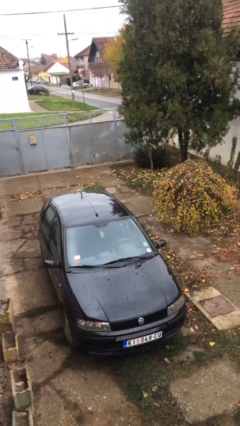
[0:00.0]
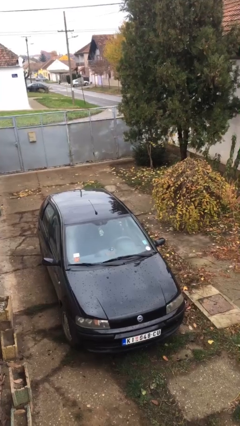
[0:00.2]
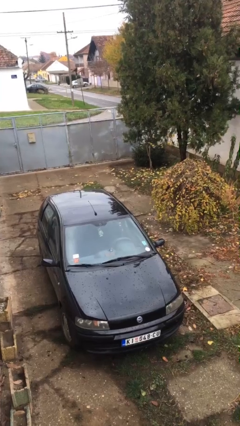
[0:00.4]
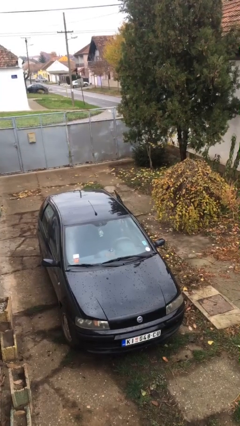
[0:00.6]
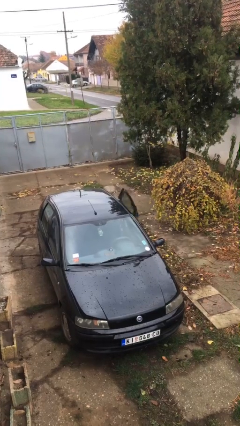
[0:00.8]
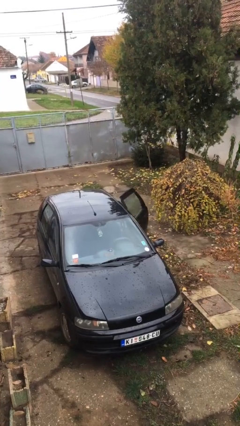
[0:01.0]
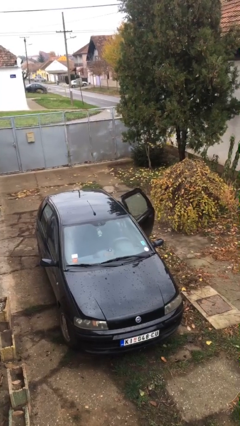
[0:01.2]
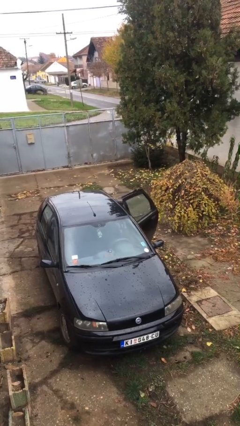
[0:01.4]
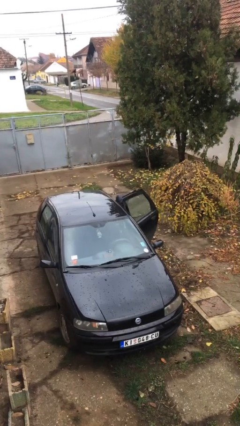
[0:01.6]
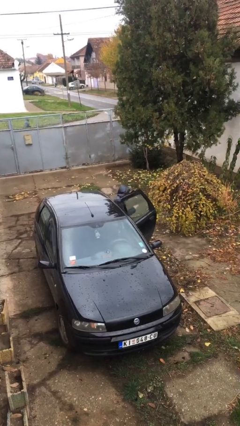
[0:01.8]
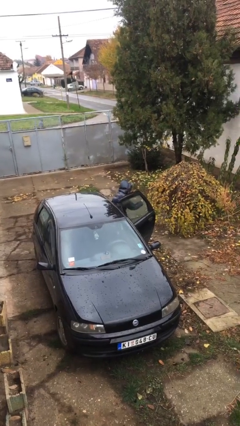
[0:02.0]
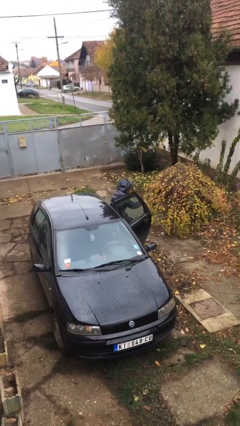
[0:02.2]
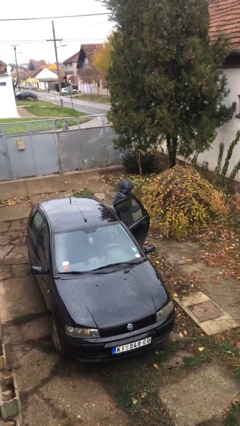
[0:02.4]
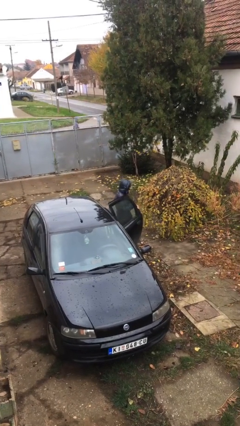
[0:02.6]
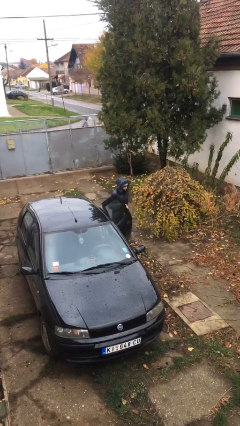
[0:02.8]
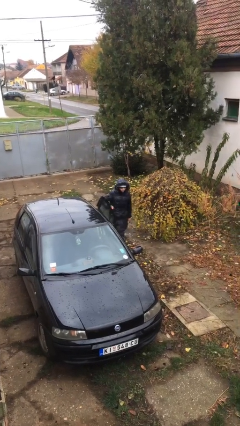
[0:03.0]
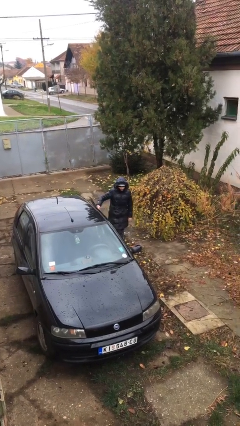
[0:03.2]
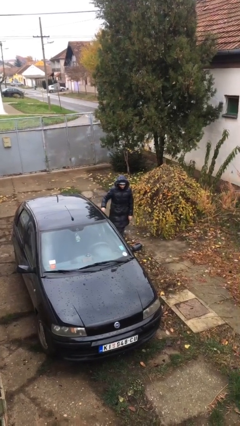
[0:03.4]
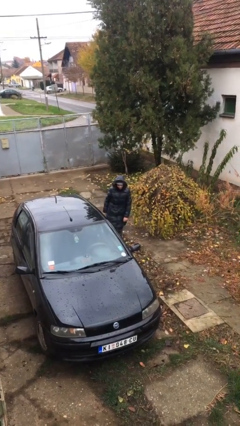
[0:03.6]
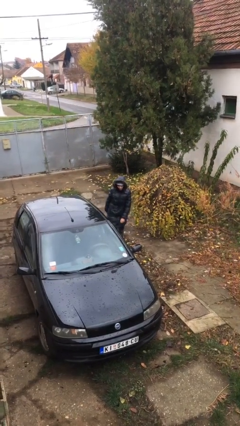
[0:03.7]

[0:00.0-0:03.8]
person exits car

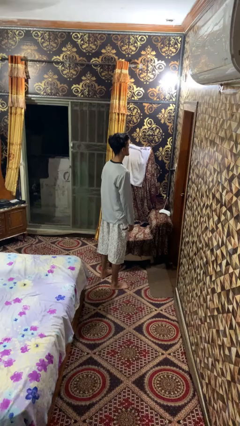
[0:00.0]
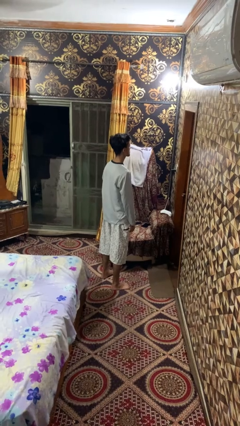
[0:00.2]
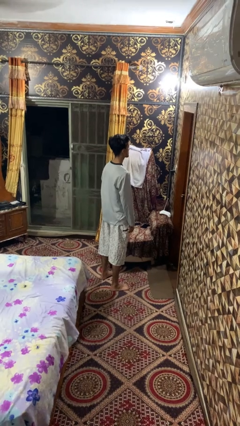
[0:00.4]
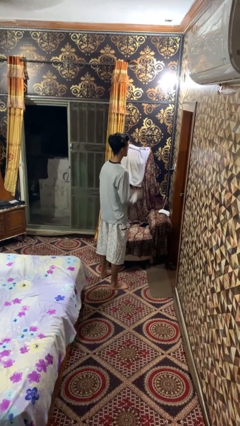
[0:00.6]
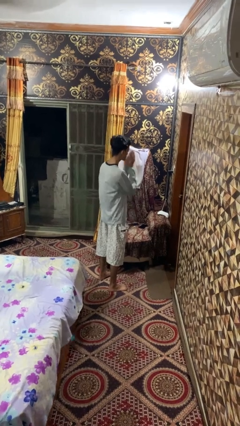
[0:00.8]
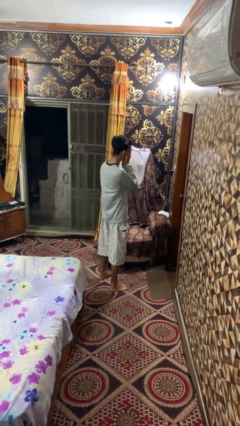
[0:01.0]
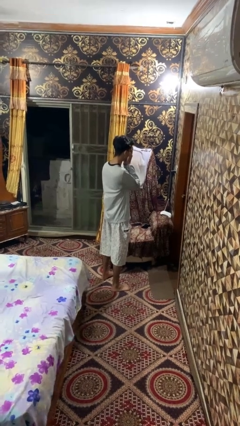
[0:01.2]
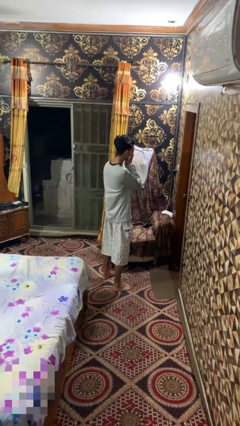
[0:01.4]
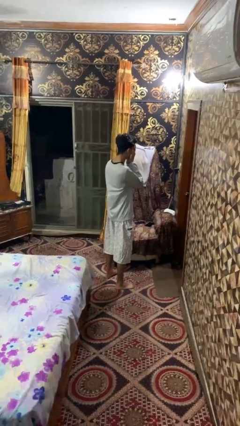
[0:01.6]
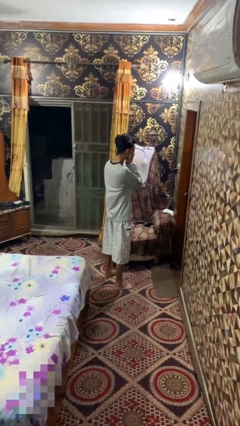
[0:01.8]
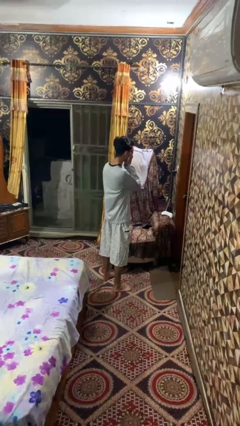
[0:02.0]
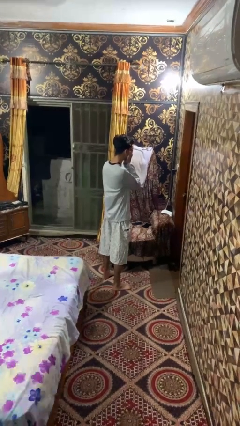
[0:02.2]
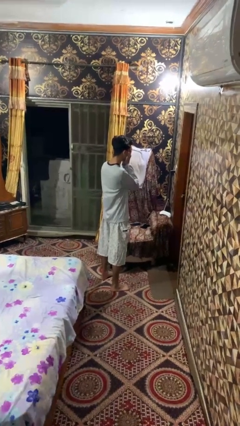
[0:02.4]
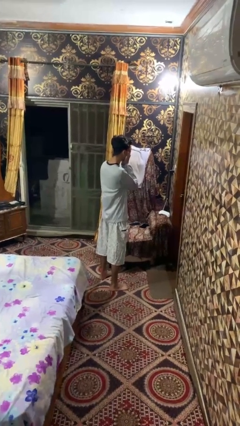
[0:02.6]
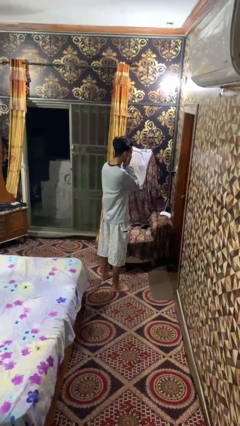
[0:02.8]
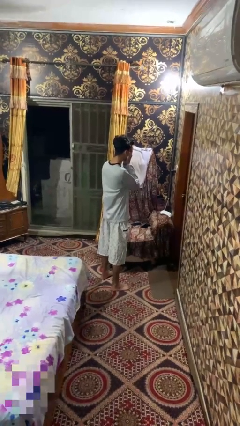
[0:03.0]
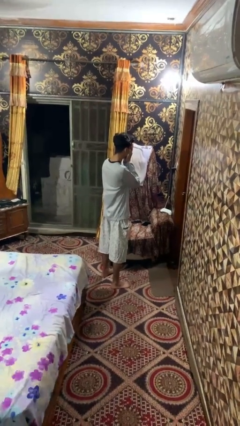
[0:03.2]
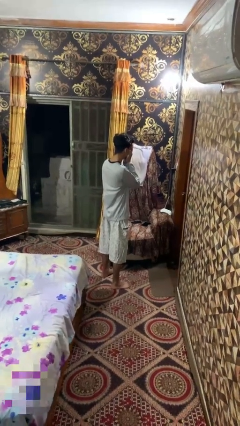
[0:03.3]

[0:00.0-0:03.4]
person covers face with hands

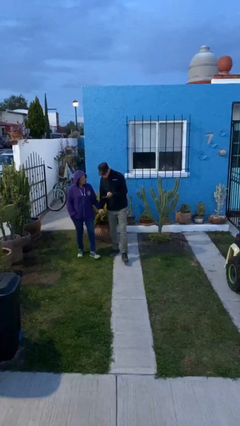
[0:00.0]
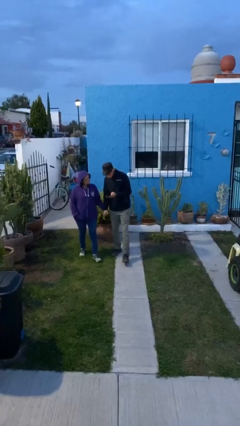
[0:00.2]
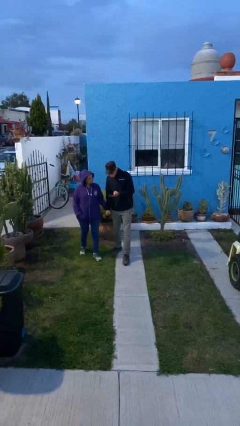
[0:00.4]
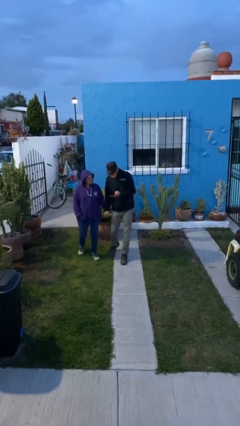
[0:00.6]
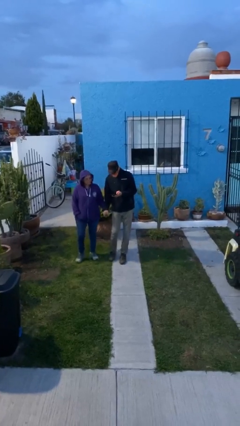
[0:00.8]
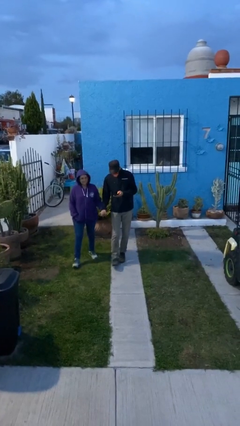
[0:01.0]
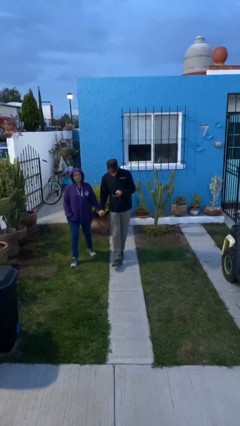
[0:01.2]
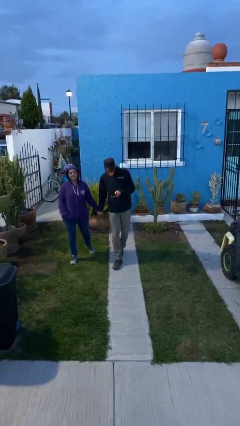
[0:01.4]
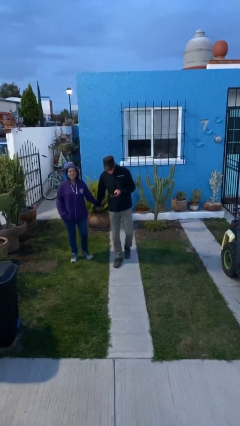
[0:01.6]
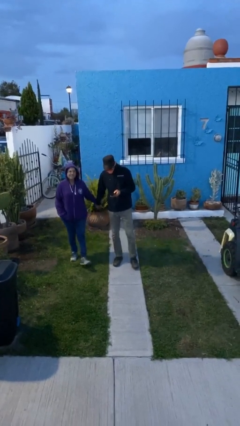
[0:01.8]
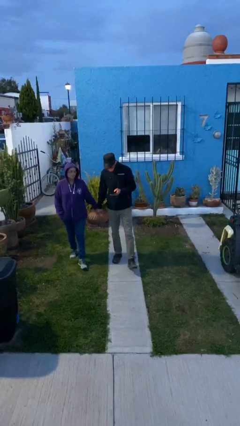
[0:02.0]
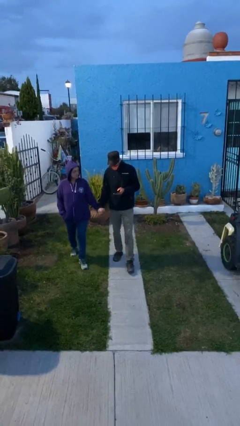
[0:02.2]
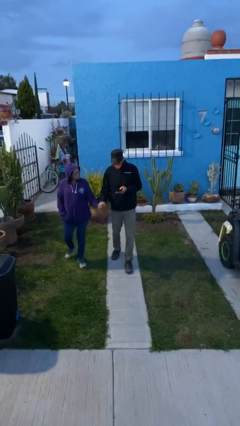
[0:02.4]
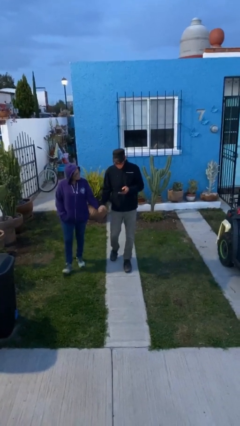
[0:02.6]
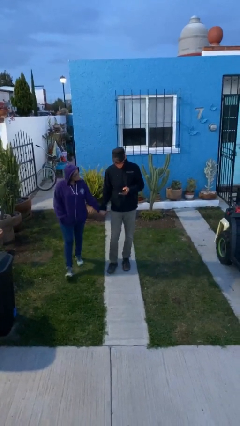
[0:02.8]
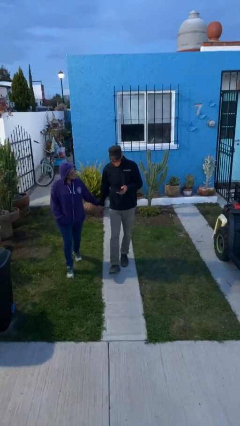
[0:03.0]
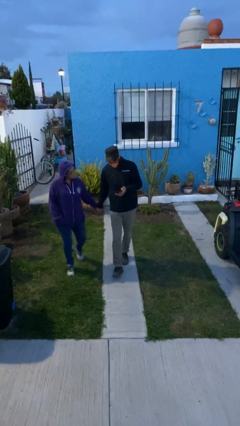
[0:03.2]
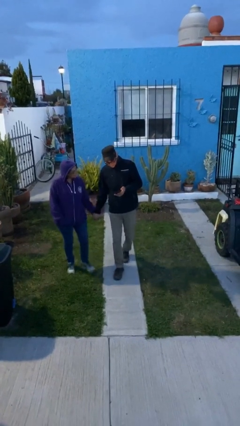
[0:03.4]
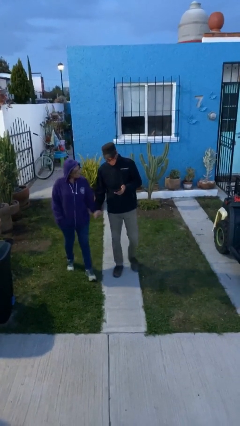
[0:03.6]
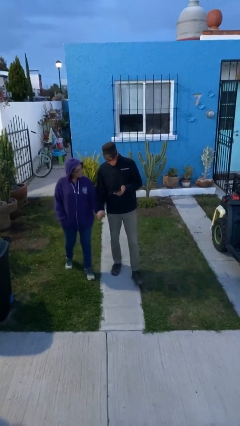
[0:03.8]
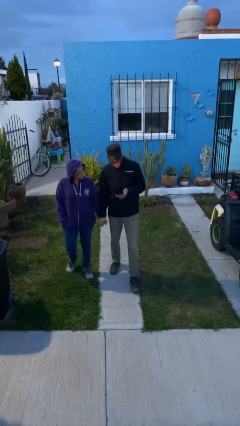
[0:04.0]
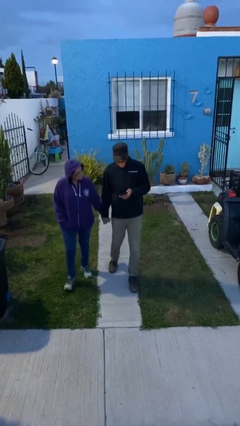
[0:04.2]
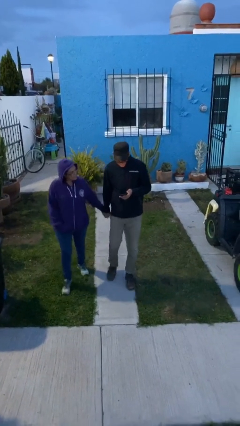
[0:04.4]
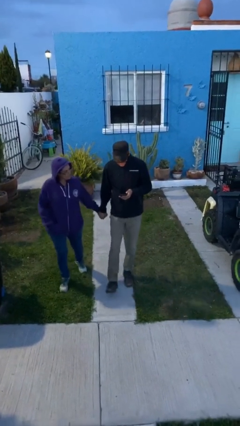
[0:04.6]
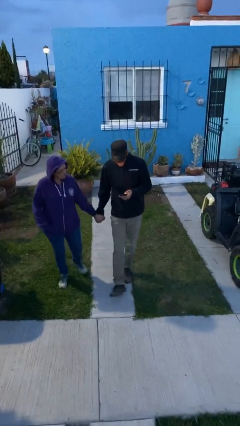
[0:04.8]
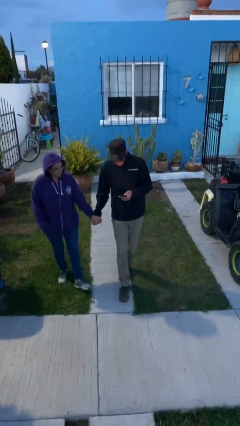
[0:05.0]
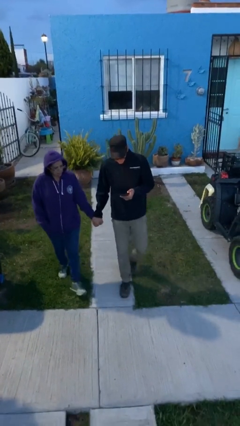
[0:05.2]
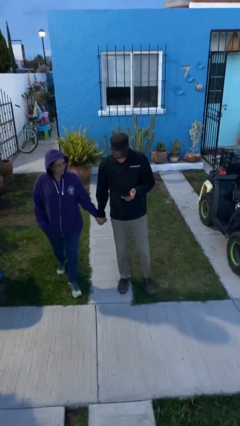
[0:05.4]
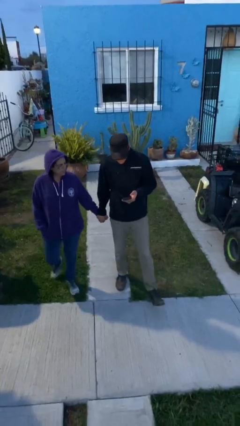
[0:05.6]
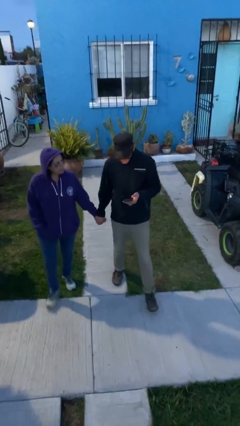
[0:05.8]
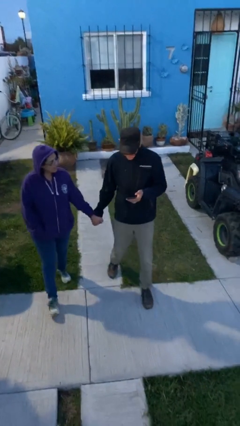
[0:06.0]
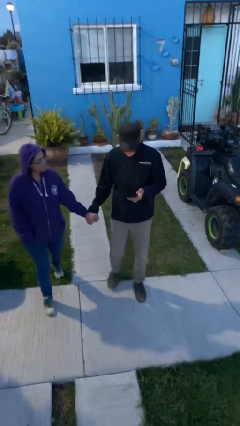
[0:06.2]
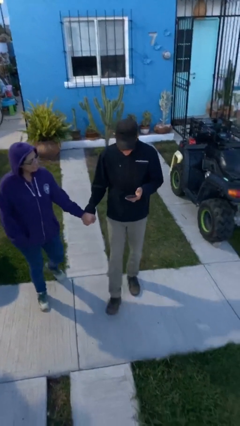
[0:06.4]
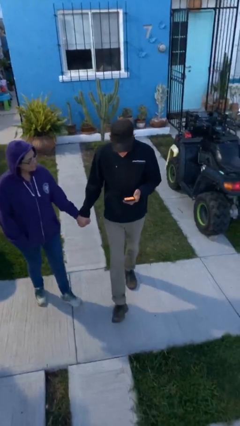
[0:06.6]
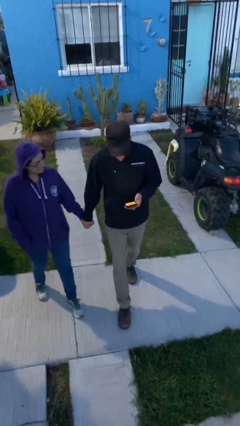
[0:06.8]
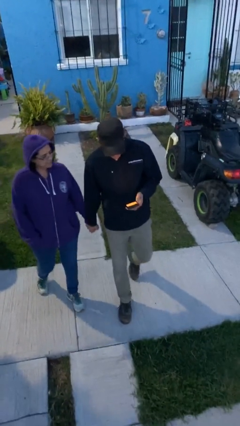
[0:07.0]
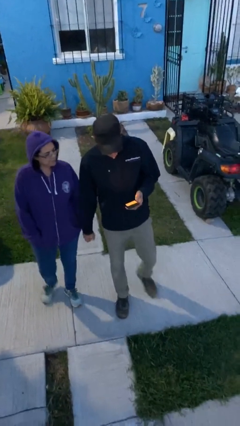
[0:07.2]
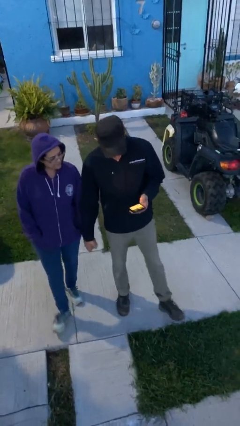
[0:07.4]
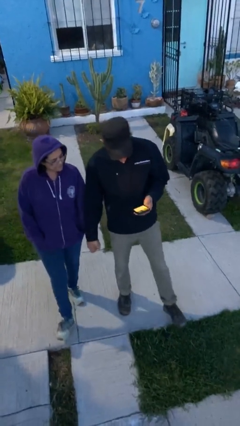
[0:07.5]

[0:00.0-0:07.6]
person holds hand

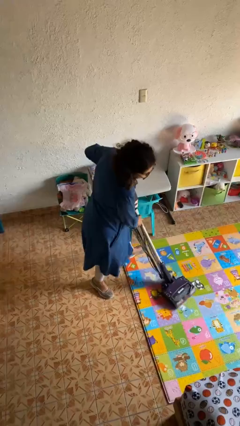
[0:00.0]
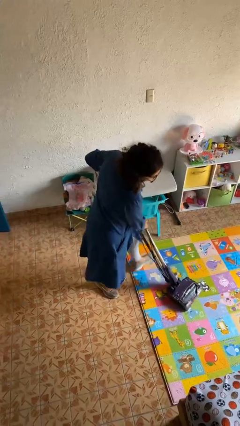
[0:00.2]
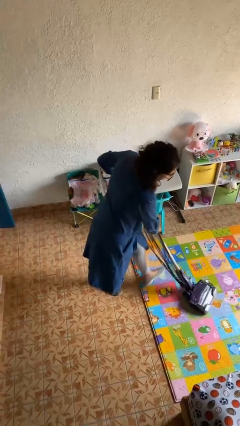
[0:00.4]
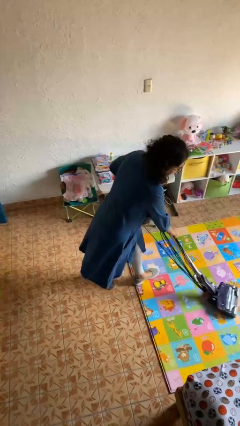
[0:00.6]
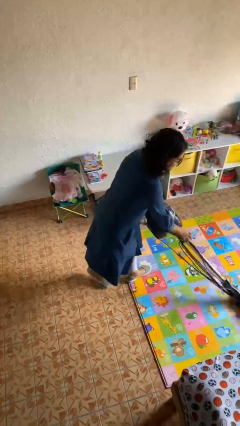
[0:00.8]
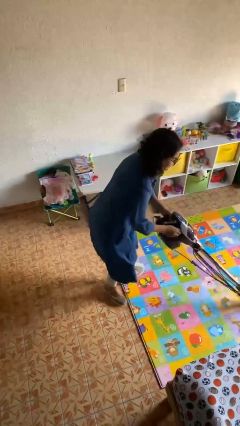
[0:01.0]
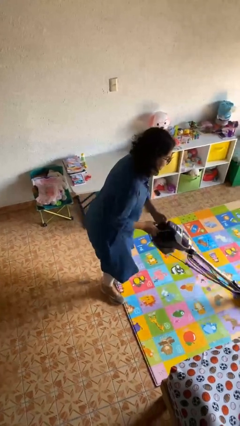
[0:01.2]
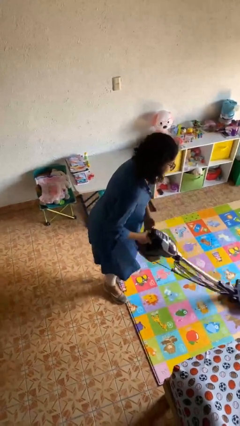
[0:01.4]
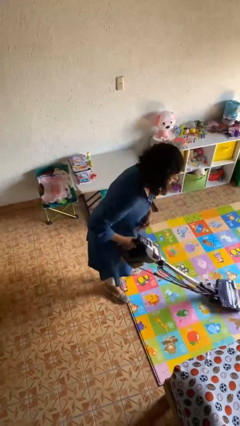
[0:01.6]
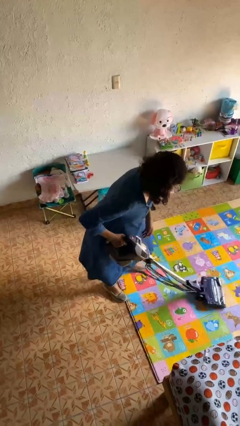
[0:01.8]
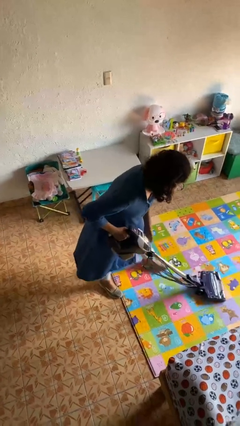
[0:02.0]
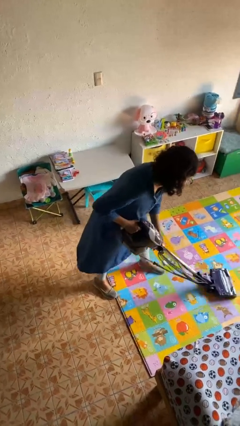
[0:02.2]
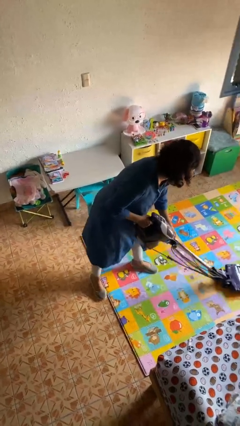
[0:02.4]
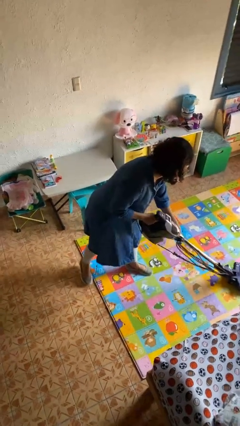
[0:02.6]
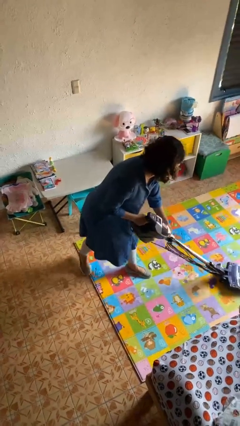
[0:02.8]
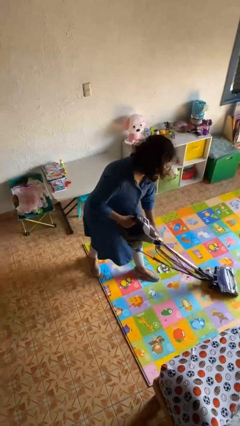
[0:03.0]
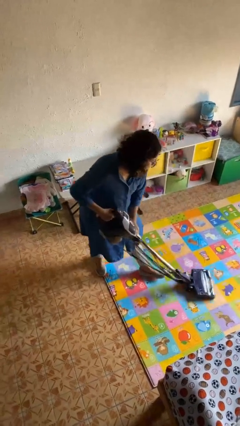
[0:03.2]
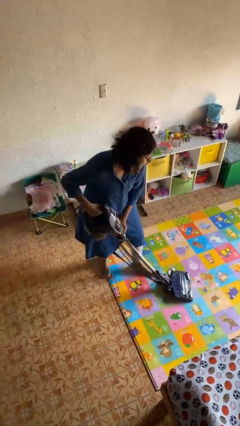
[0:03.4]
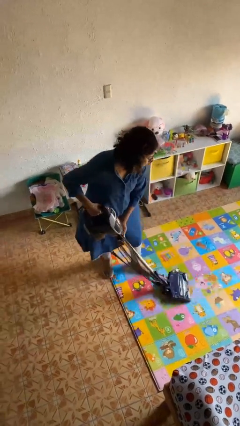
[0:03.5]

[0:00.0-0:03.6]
person vacuums carpet
